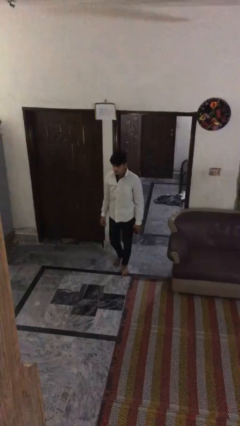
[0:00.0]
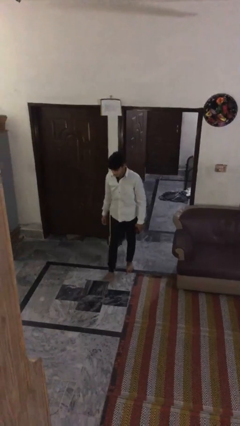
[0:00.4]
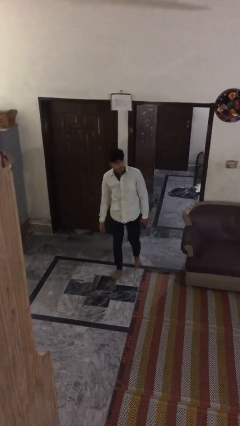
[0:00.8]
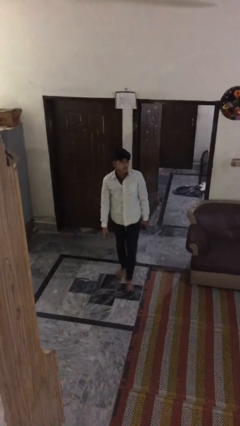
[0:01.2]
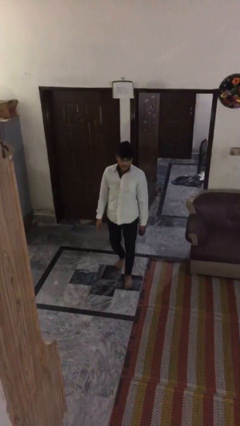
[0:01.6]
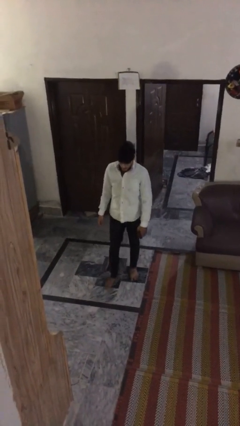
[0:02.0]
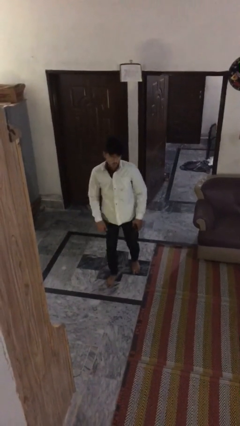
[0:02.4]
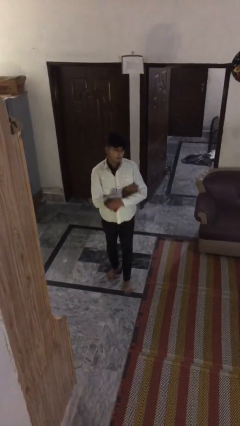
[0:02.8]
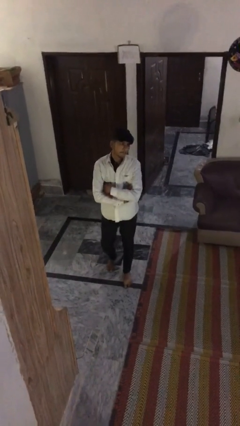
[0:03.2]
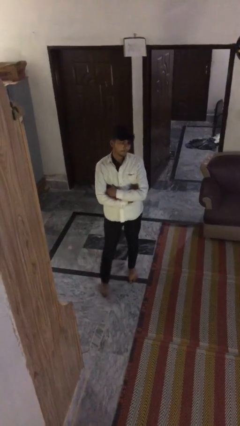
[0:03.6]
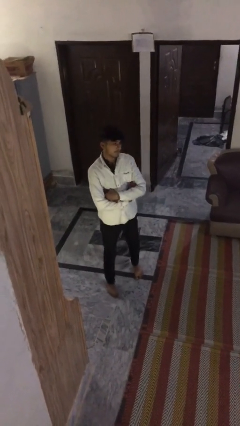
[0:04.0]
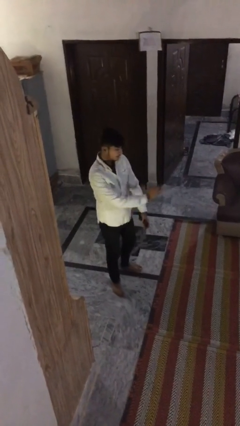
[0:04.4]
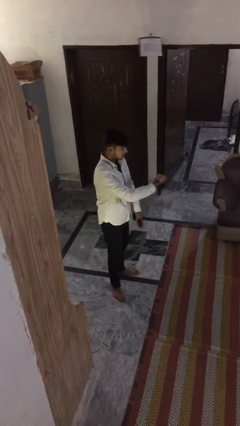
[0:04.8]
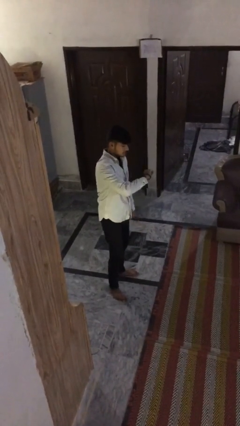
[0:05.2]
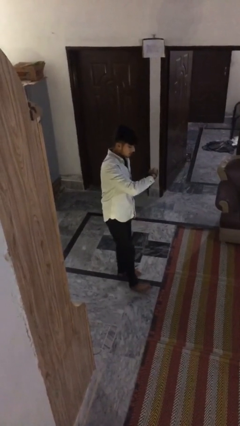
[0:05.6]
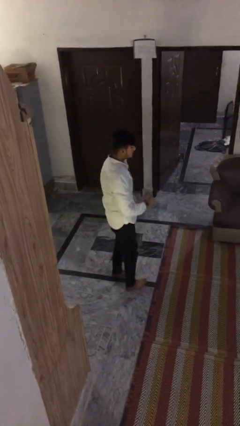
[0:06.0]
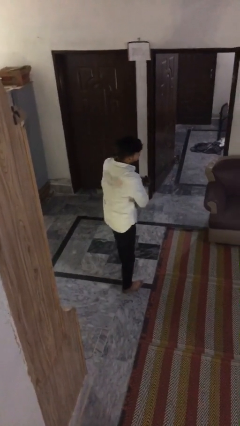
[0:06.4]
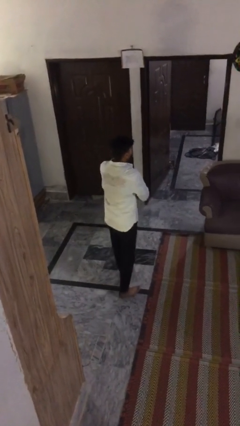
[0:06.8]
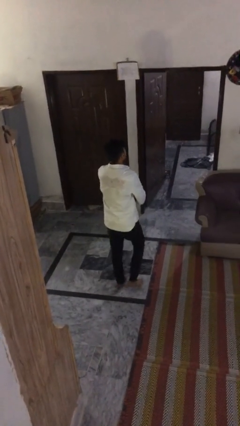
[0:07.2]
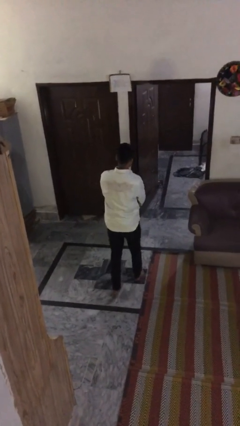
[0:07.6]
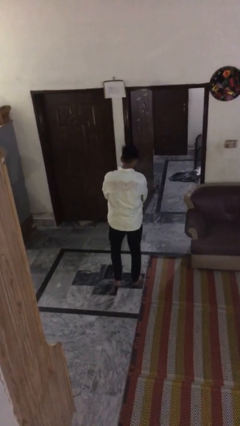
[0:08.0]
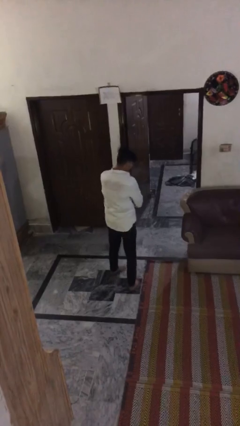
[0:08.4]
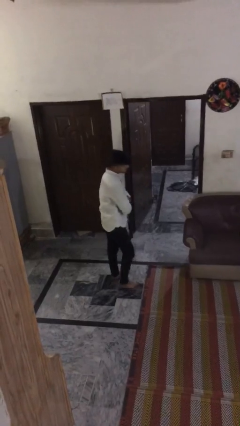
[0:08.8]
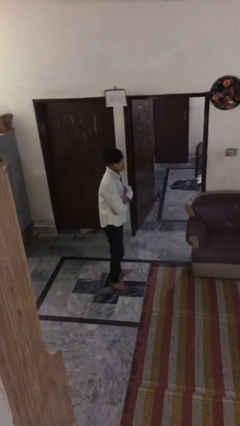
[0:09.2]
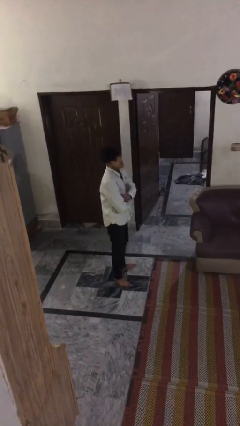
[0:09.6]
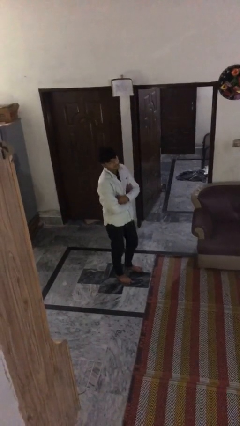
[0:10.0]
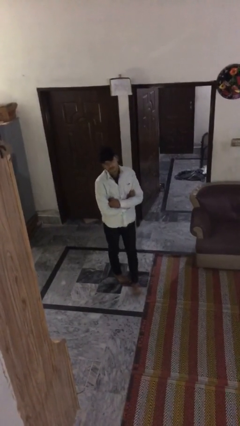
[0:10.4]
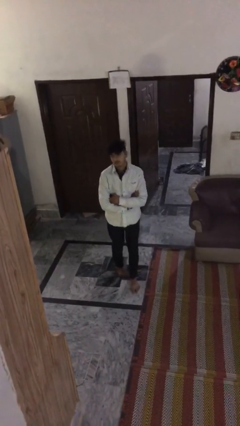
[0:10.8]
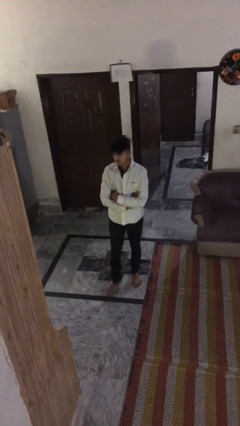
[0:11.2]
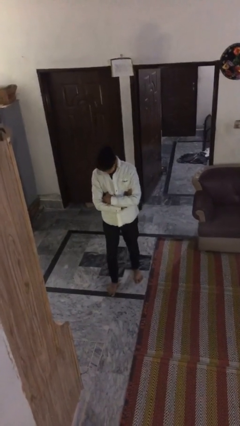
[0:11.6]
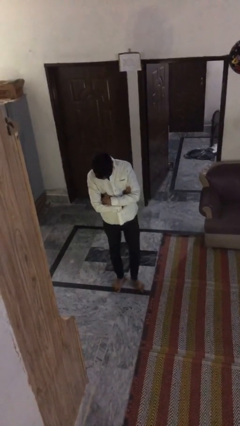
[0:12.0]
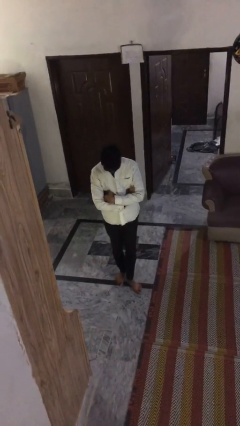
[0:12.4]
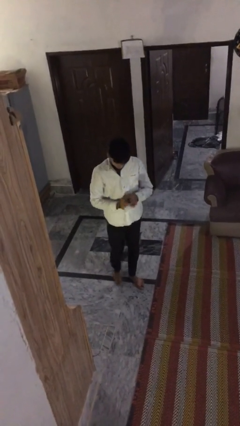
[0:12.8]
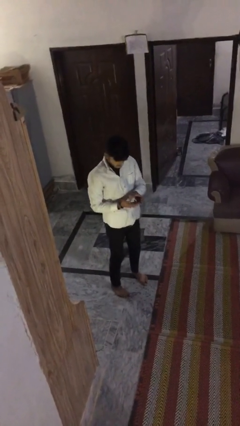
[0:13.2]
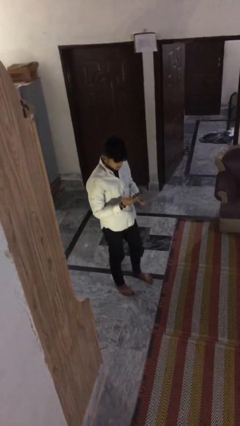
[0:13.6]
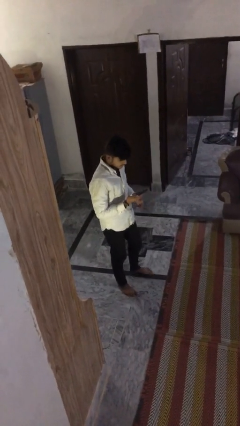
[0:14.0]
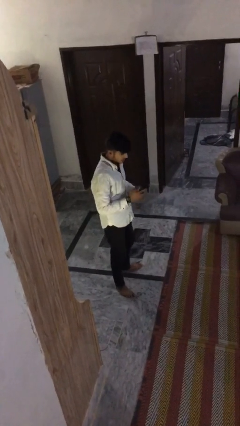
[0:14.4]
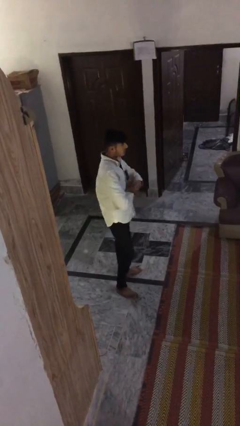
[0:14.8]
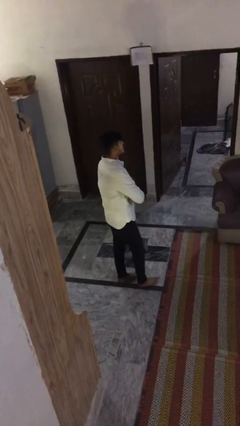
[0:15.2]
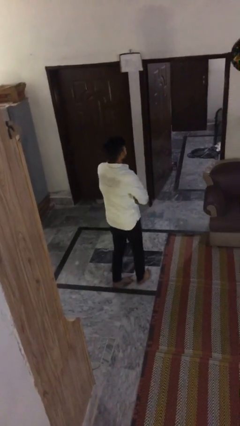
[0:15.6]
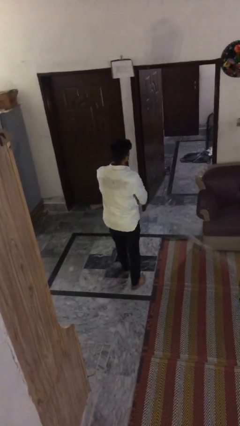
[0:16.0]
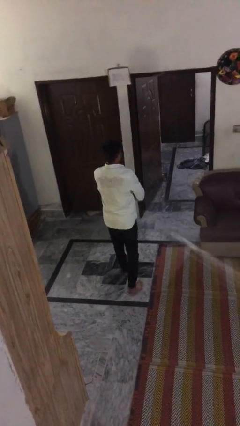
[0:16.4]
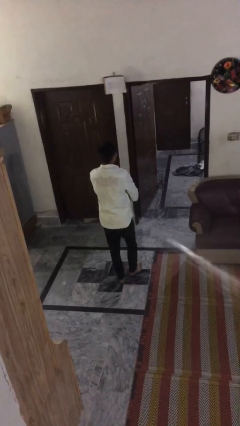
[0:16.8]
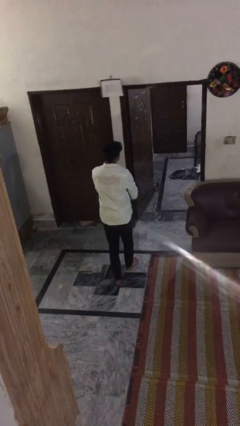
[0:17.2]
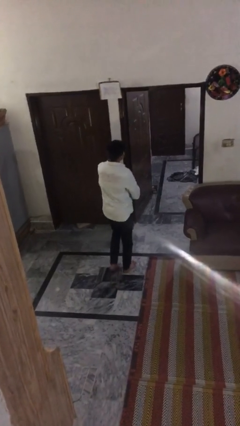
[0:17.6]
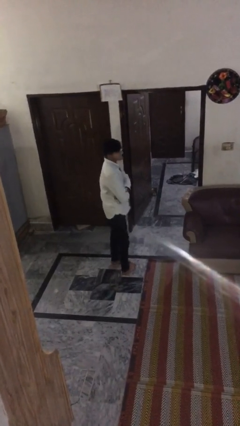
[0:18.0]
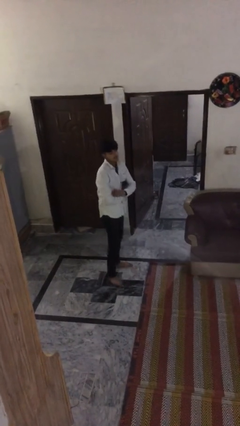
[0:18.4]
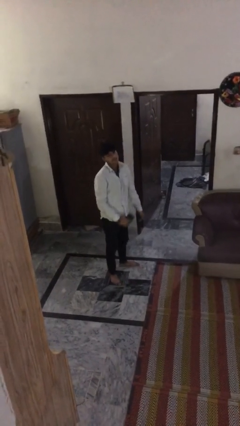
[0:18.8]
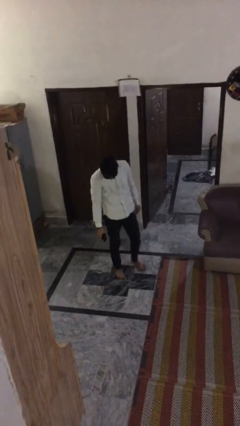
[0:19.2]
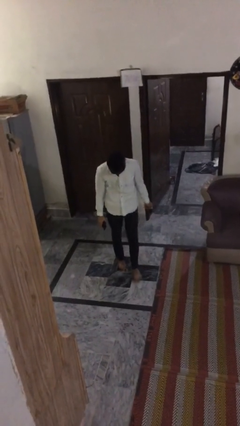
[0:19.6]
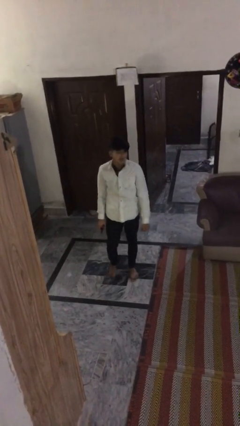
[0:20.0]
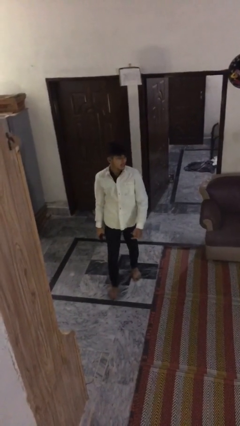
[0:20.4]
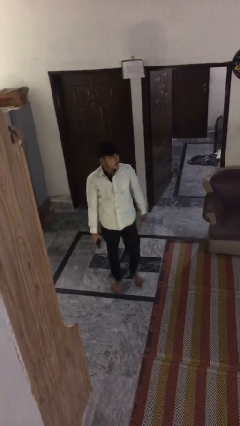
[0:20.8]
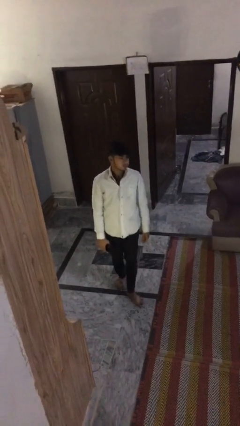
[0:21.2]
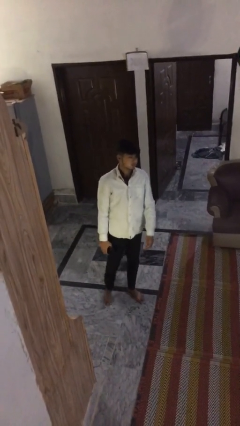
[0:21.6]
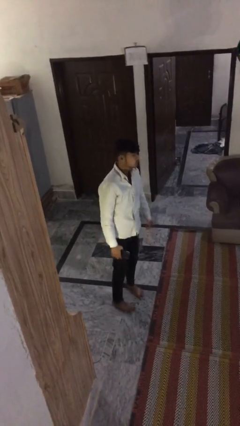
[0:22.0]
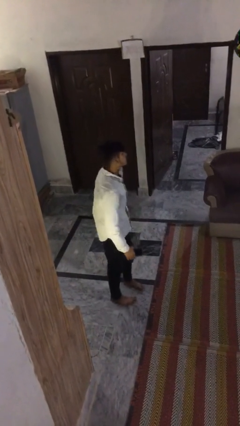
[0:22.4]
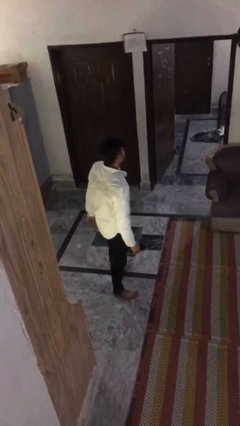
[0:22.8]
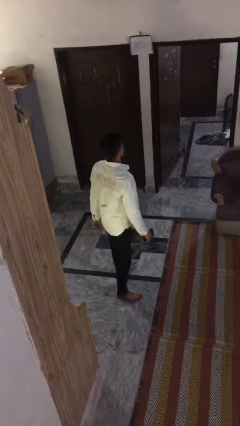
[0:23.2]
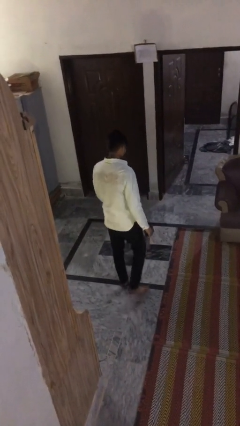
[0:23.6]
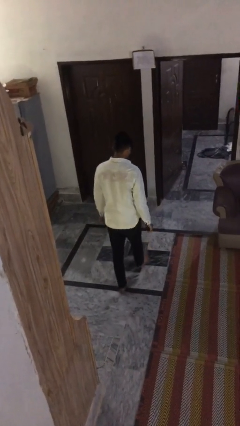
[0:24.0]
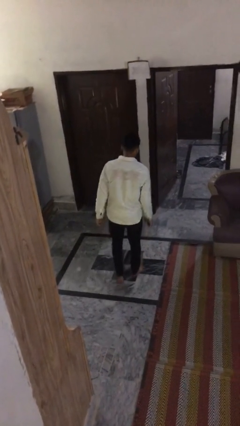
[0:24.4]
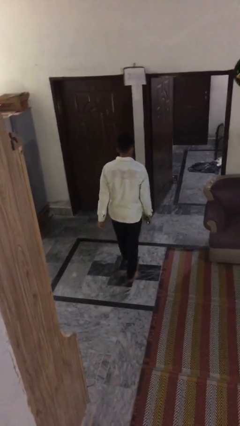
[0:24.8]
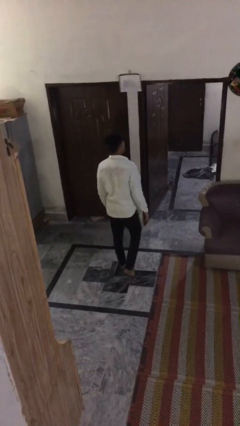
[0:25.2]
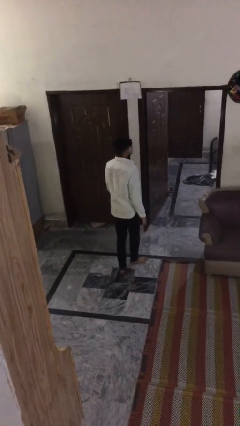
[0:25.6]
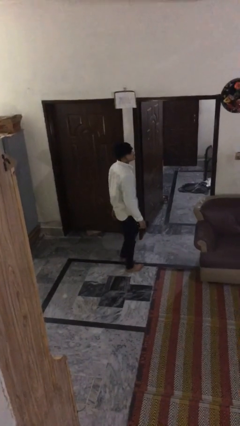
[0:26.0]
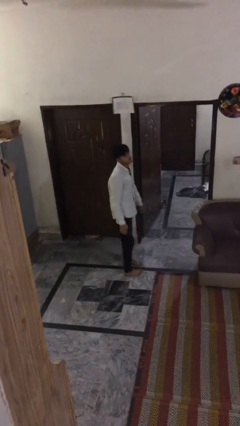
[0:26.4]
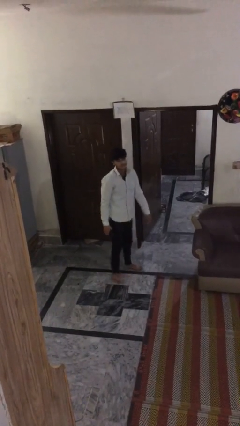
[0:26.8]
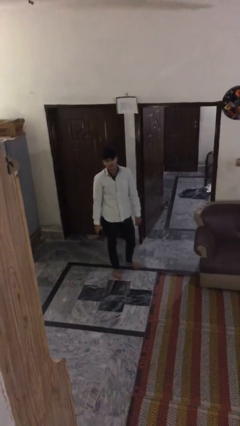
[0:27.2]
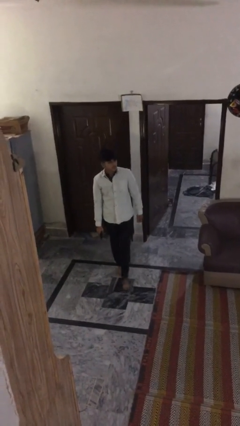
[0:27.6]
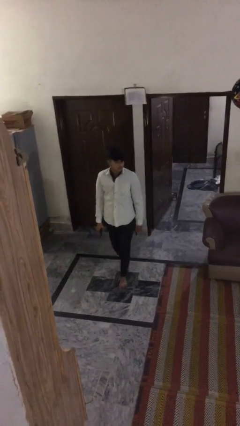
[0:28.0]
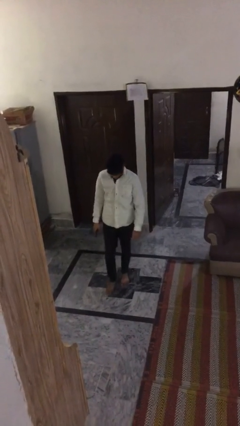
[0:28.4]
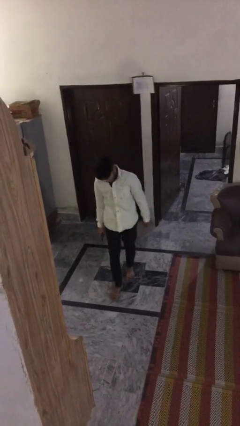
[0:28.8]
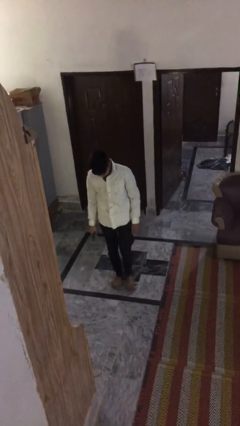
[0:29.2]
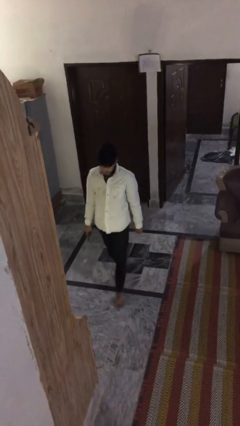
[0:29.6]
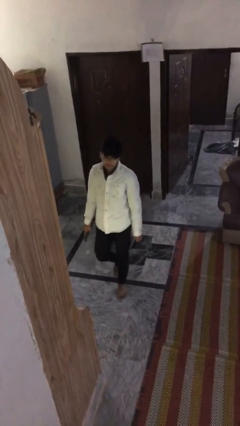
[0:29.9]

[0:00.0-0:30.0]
person walks

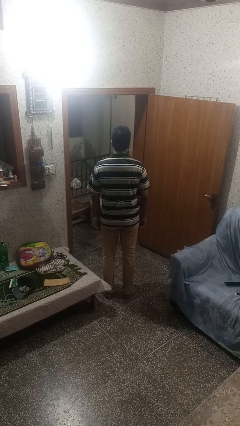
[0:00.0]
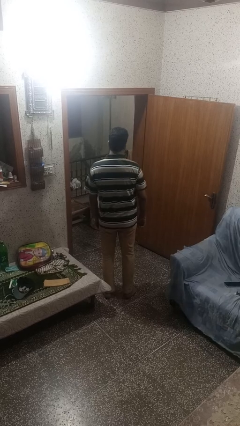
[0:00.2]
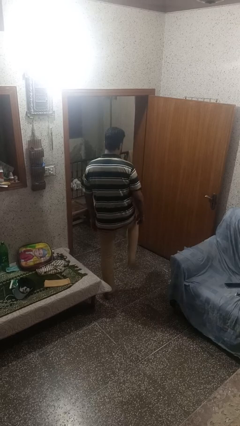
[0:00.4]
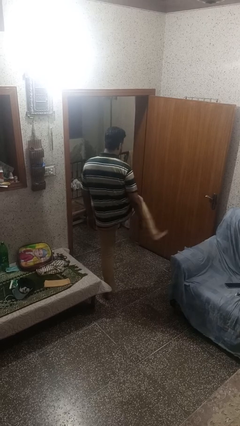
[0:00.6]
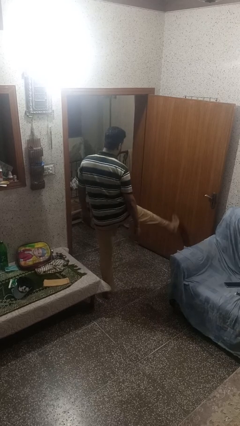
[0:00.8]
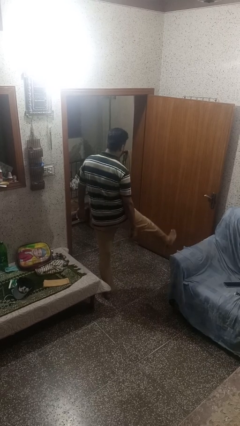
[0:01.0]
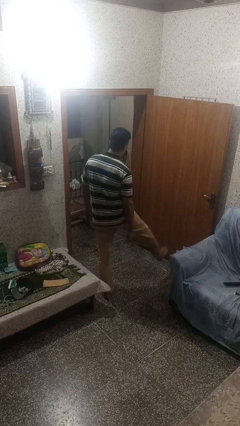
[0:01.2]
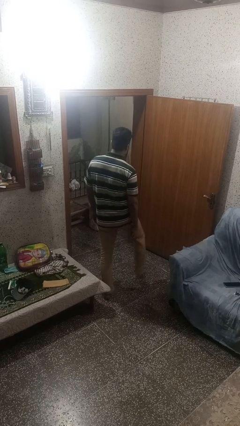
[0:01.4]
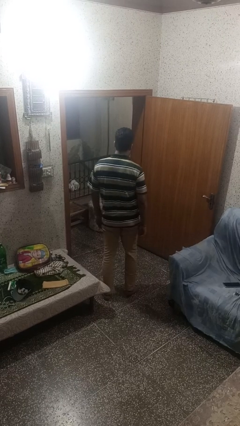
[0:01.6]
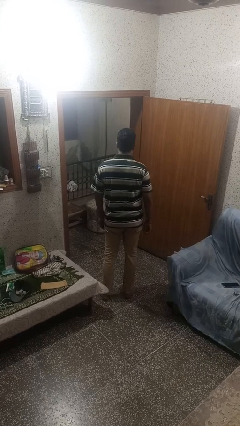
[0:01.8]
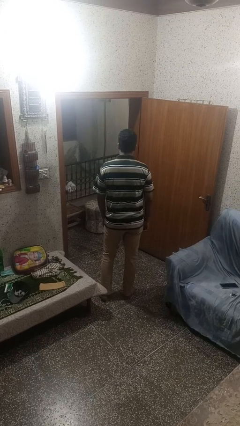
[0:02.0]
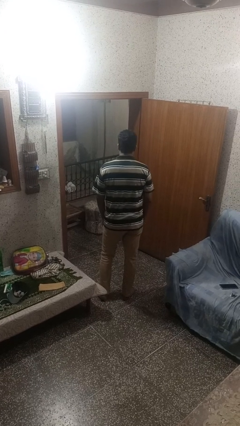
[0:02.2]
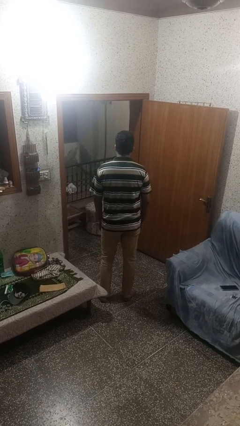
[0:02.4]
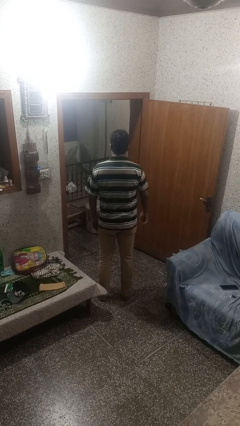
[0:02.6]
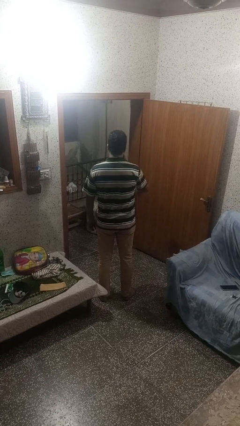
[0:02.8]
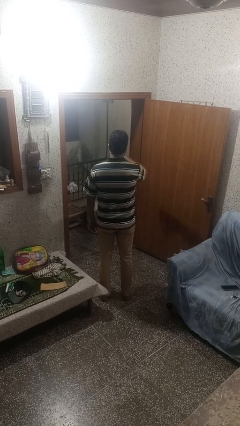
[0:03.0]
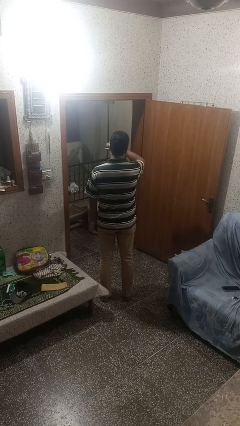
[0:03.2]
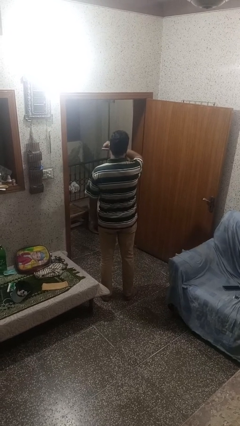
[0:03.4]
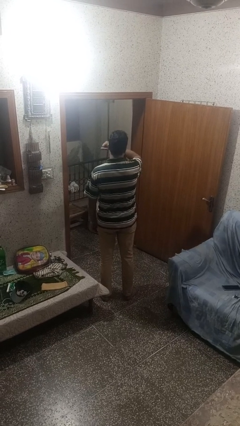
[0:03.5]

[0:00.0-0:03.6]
person karate kicks
